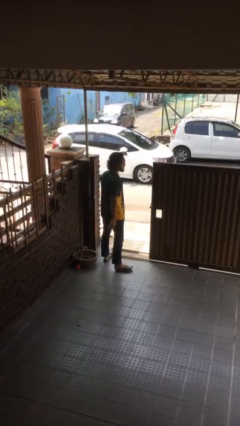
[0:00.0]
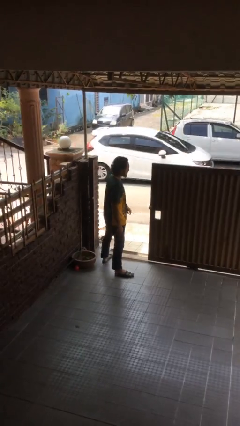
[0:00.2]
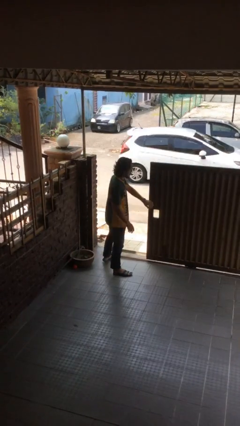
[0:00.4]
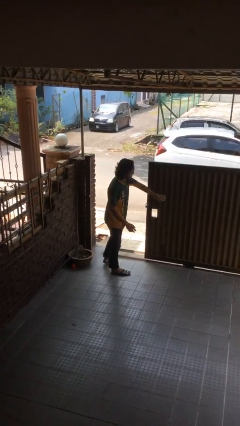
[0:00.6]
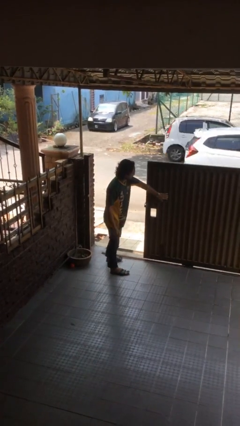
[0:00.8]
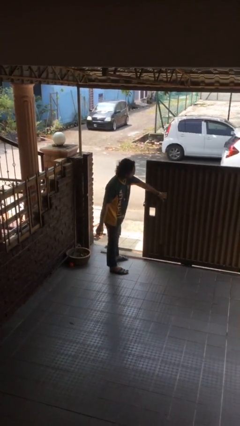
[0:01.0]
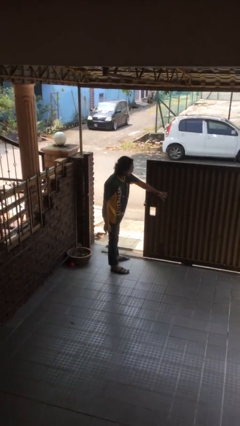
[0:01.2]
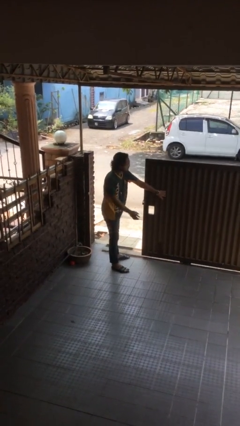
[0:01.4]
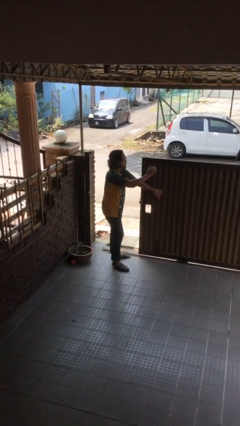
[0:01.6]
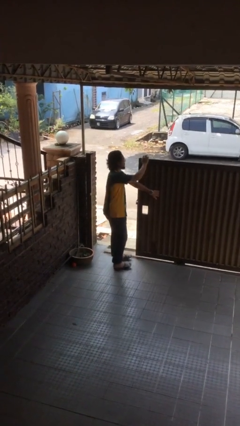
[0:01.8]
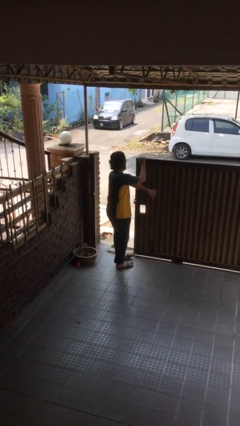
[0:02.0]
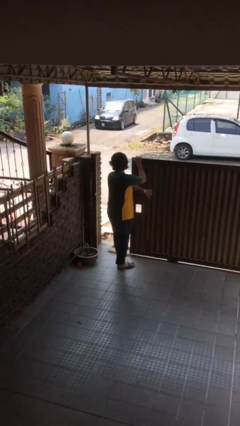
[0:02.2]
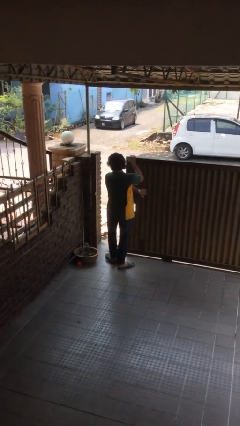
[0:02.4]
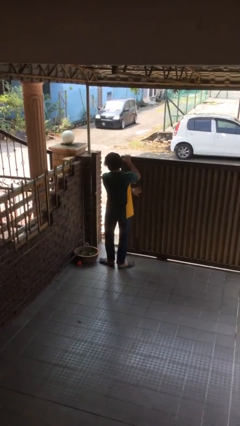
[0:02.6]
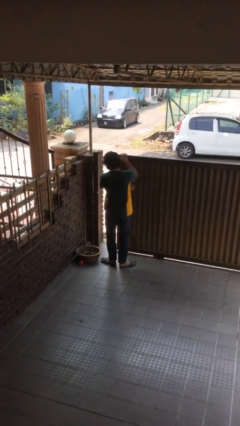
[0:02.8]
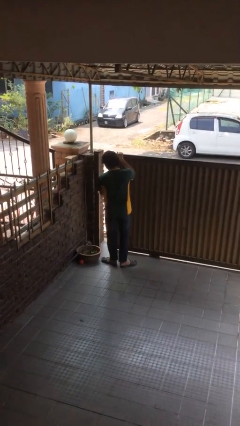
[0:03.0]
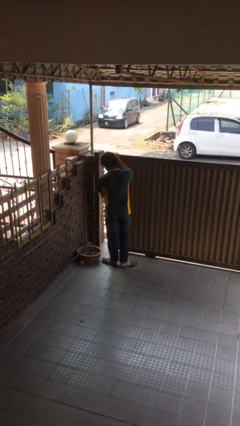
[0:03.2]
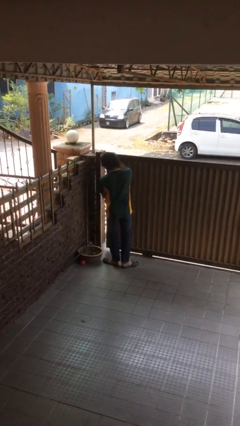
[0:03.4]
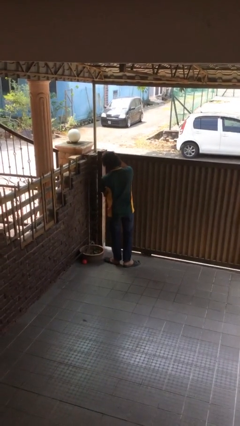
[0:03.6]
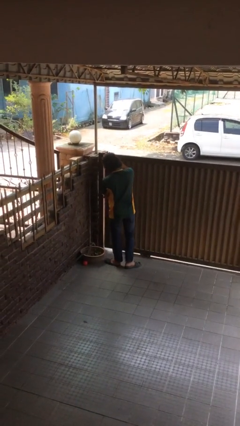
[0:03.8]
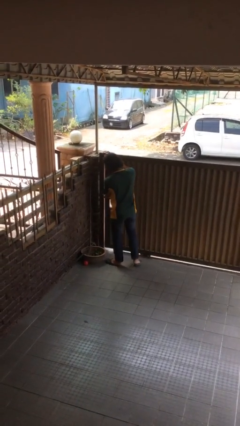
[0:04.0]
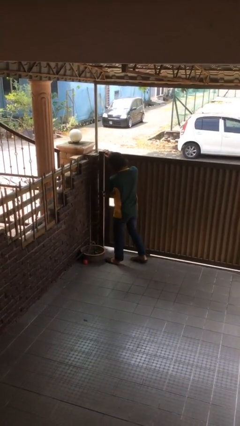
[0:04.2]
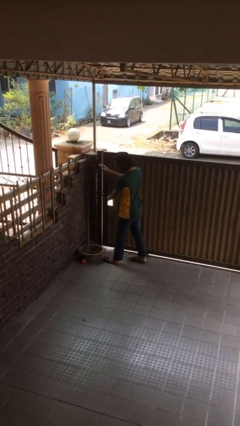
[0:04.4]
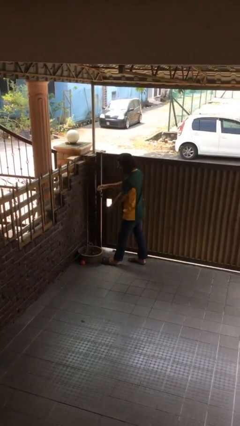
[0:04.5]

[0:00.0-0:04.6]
person closes facility door

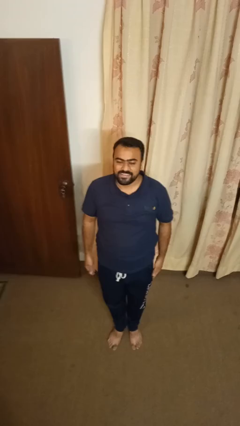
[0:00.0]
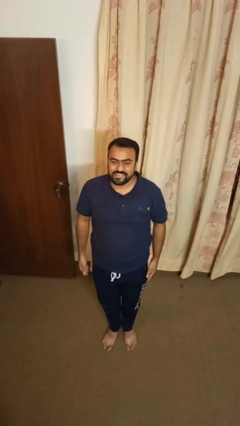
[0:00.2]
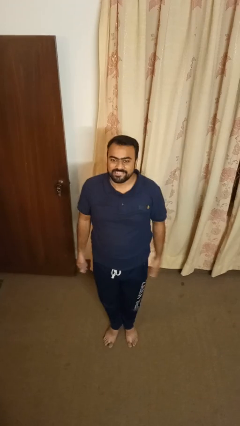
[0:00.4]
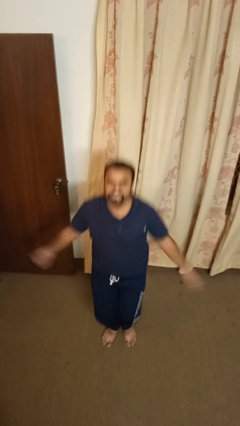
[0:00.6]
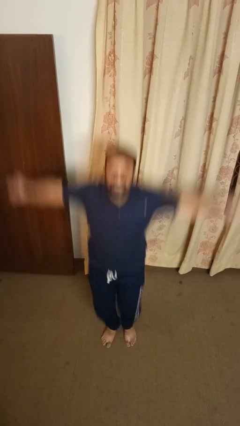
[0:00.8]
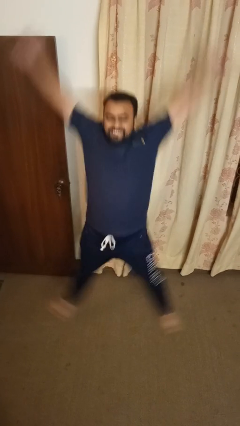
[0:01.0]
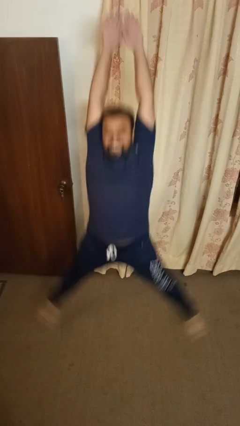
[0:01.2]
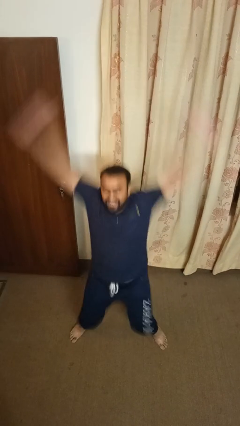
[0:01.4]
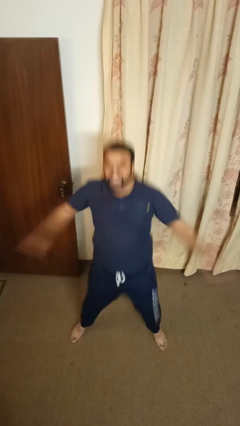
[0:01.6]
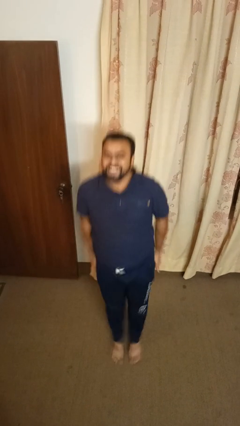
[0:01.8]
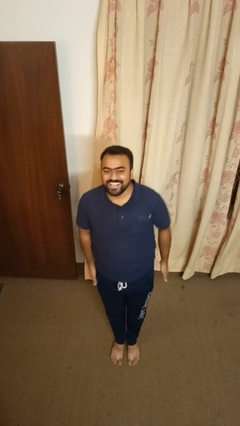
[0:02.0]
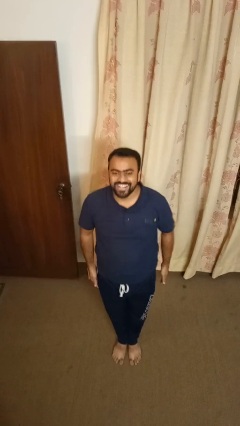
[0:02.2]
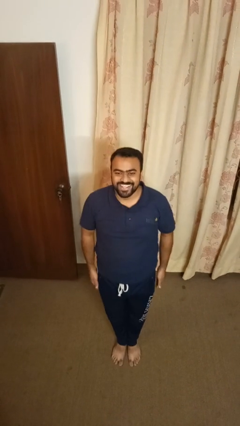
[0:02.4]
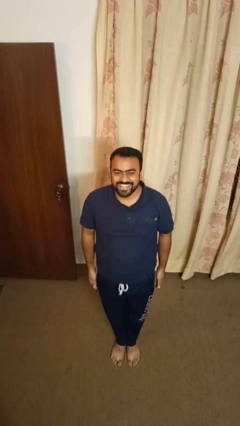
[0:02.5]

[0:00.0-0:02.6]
person exercises with jumping jacks

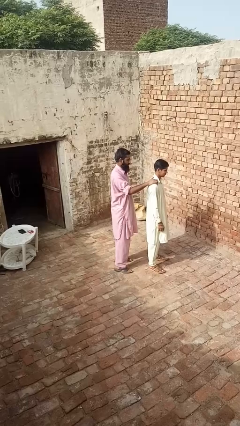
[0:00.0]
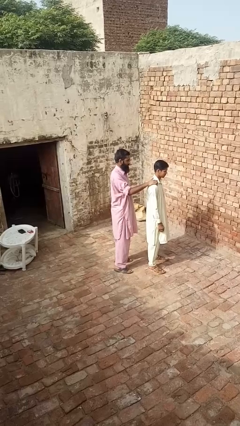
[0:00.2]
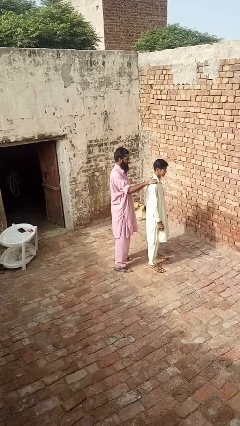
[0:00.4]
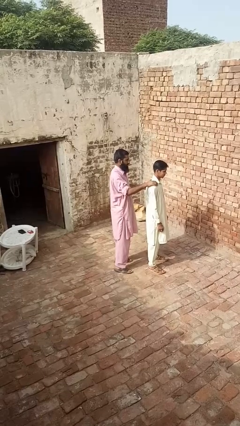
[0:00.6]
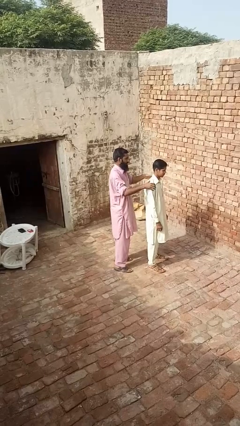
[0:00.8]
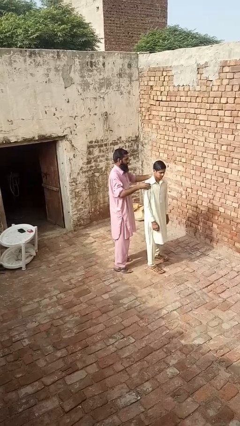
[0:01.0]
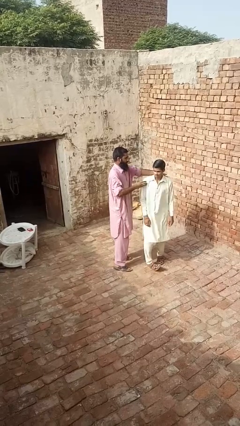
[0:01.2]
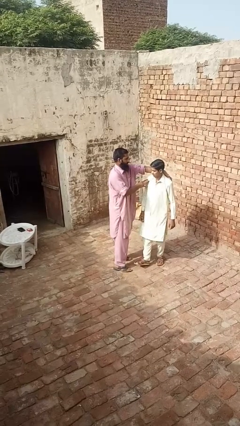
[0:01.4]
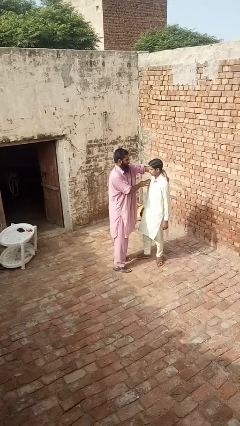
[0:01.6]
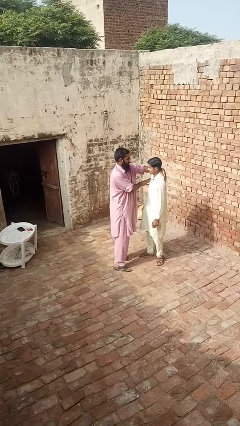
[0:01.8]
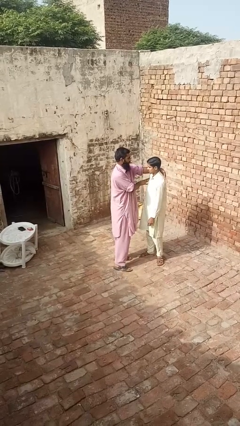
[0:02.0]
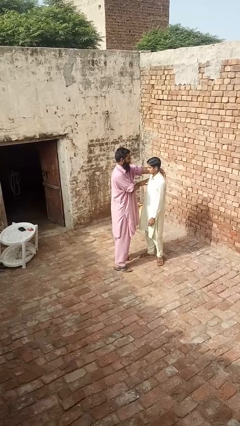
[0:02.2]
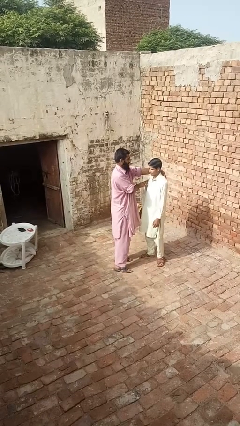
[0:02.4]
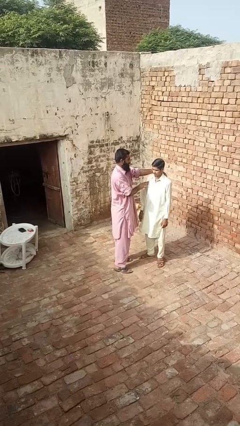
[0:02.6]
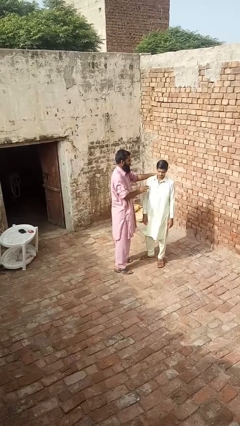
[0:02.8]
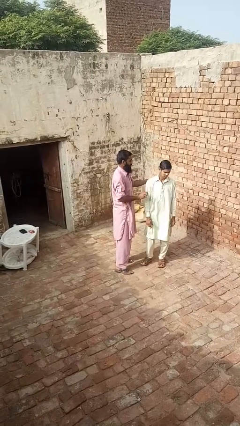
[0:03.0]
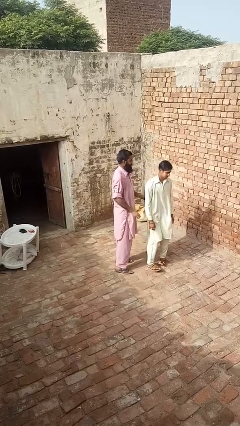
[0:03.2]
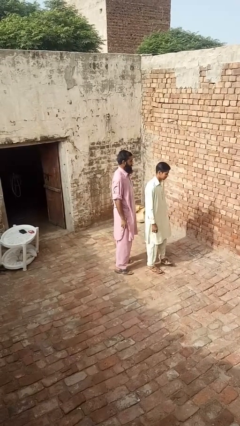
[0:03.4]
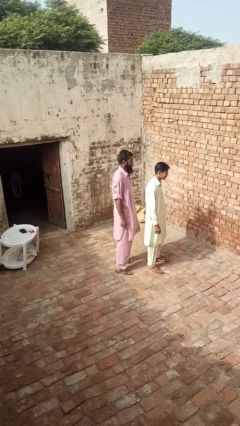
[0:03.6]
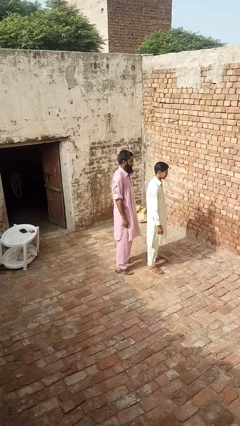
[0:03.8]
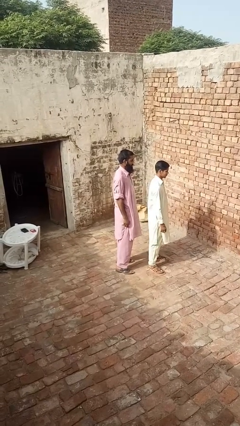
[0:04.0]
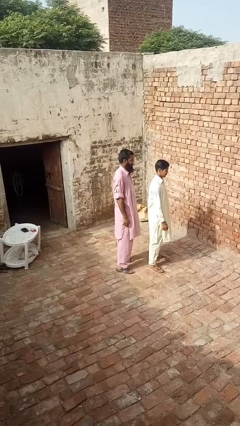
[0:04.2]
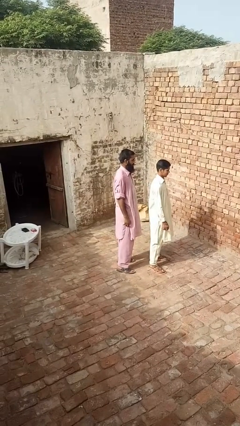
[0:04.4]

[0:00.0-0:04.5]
person spins person around

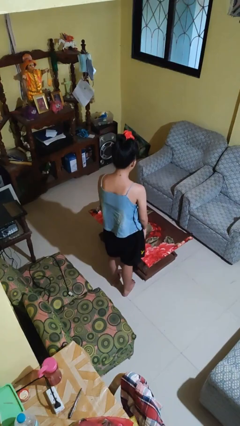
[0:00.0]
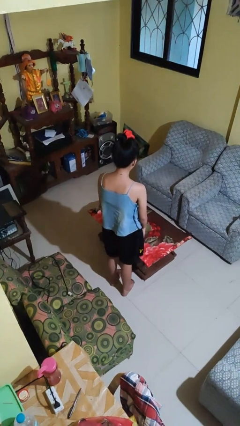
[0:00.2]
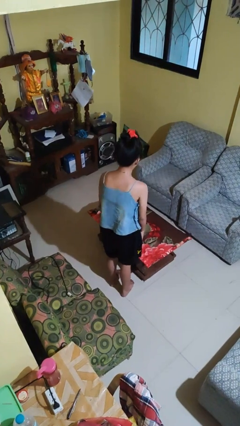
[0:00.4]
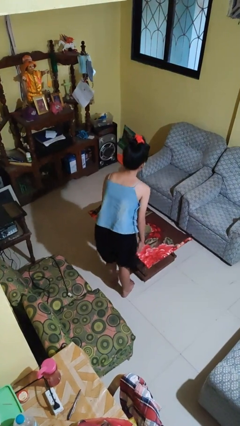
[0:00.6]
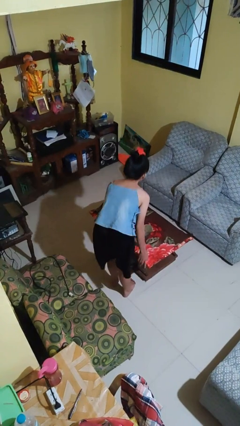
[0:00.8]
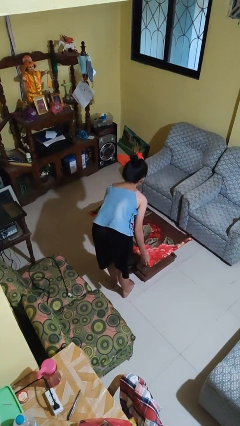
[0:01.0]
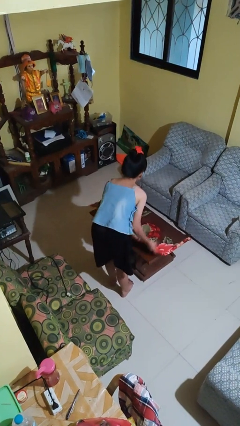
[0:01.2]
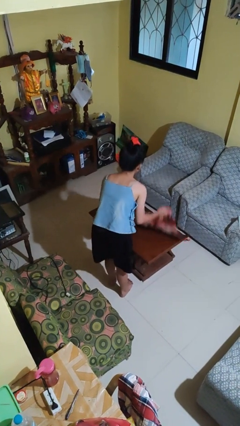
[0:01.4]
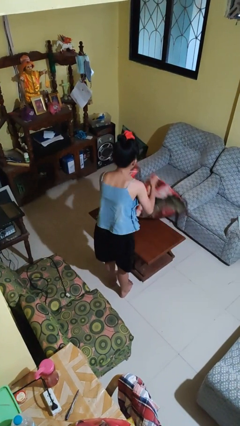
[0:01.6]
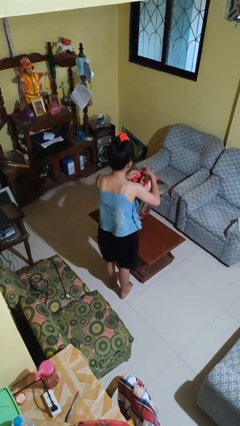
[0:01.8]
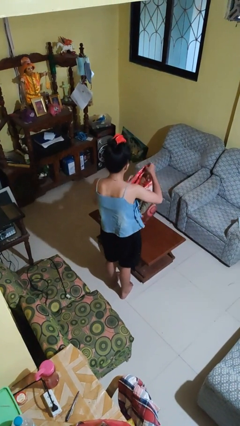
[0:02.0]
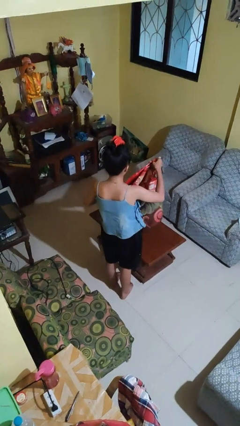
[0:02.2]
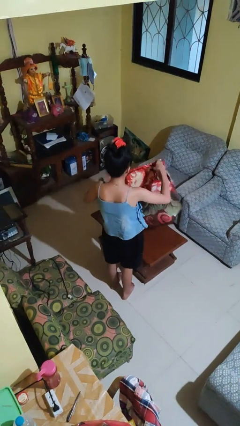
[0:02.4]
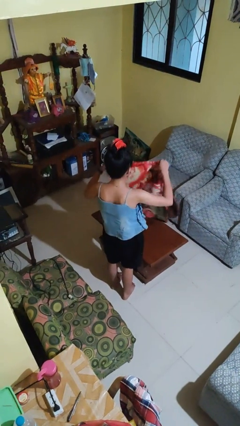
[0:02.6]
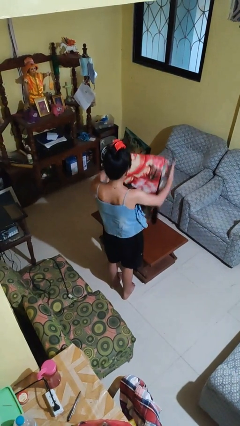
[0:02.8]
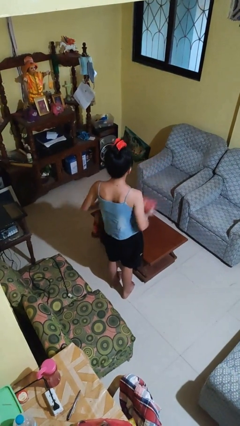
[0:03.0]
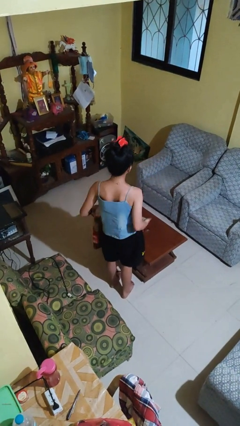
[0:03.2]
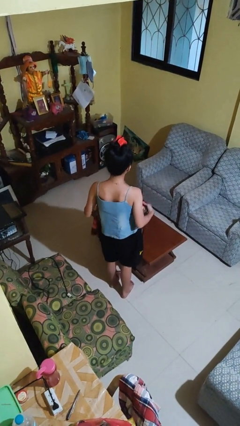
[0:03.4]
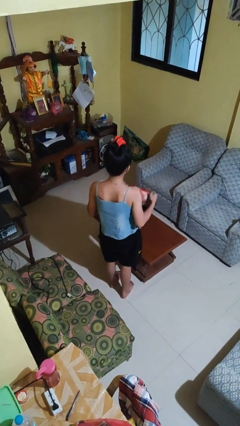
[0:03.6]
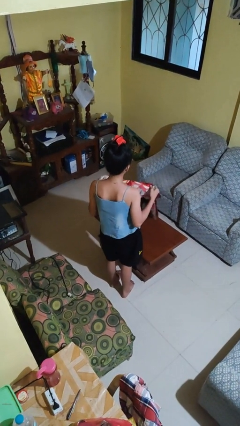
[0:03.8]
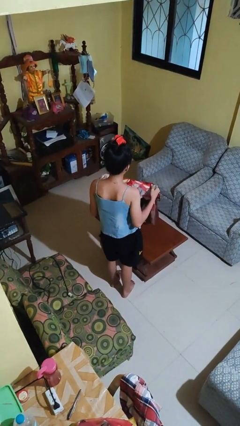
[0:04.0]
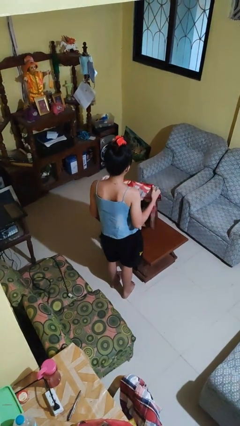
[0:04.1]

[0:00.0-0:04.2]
person folds tablecloth

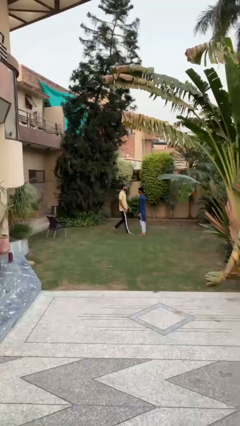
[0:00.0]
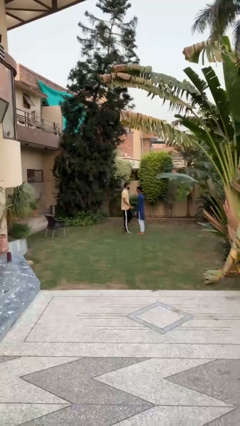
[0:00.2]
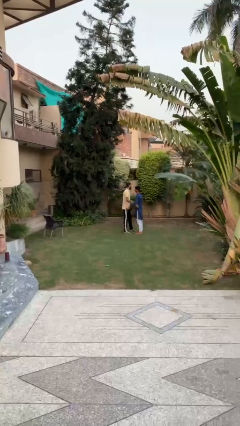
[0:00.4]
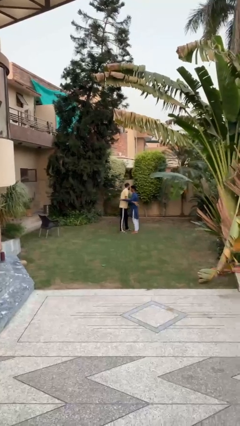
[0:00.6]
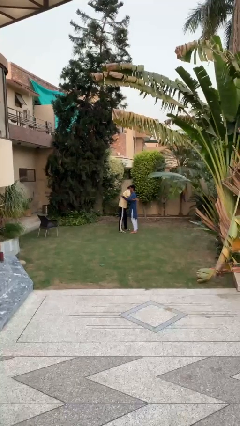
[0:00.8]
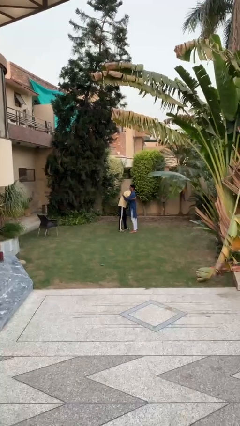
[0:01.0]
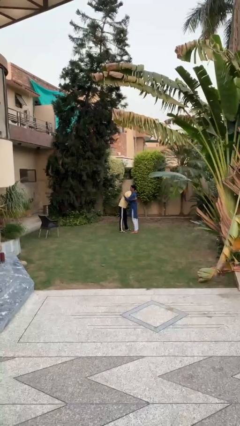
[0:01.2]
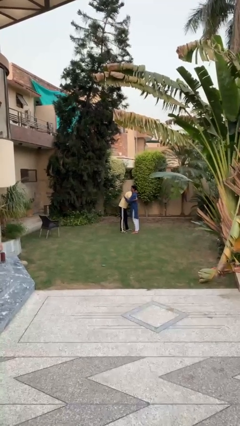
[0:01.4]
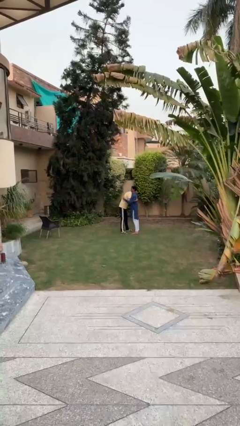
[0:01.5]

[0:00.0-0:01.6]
person embraces person
